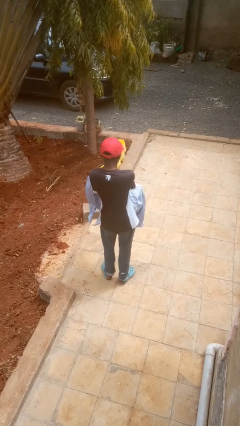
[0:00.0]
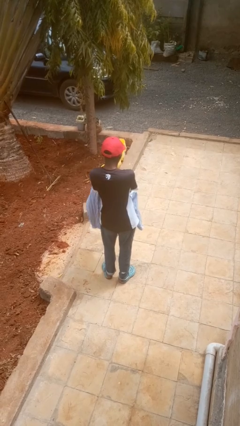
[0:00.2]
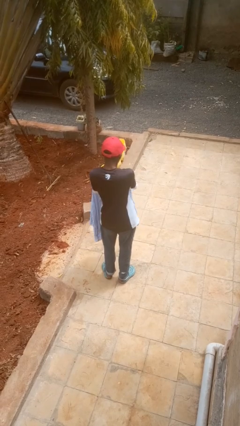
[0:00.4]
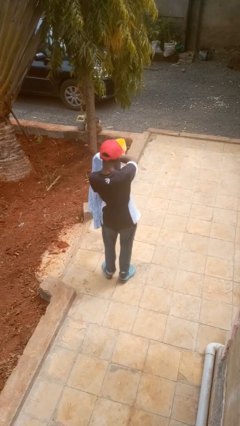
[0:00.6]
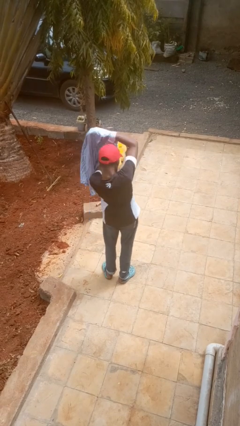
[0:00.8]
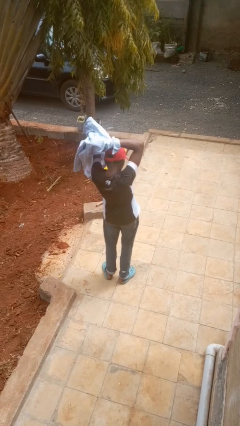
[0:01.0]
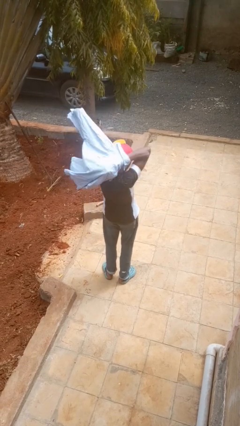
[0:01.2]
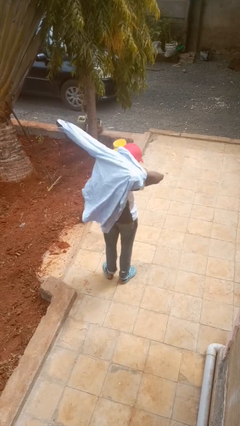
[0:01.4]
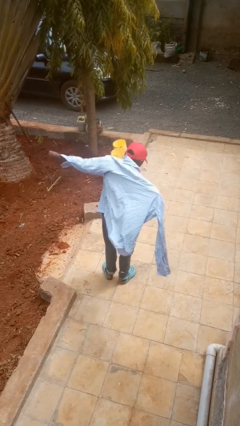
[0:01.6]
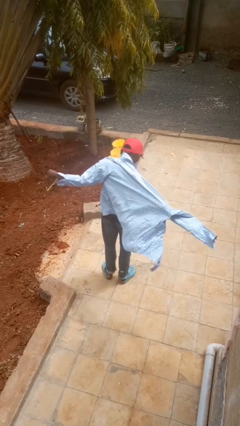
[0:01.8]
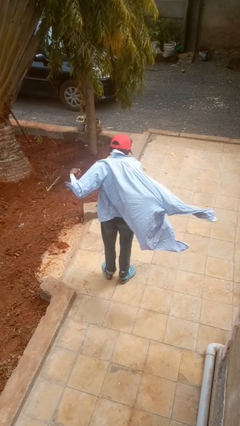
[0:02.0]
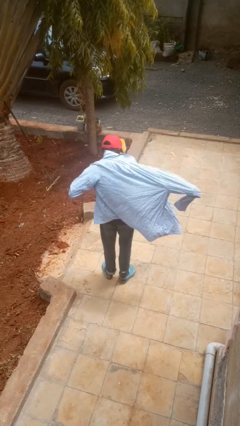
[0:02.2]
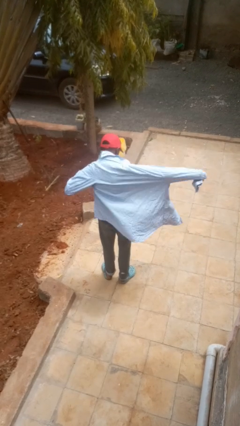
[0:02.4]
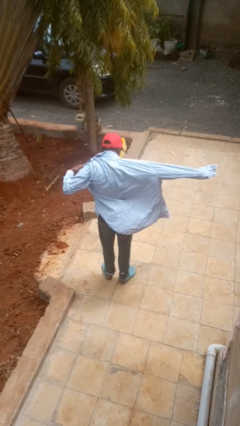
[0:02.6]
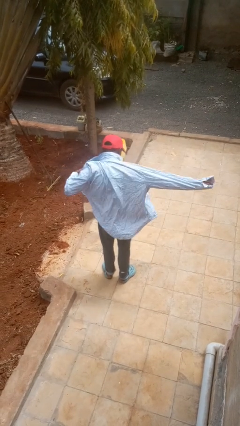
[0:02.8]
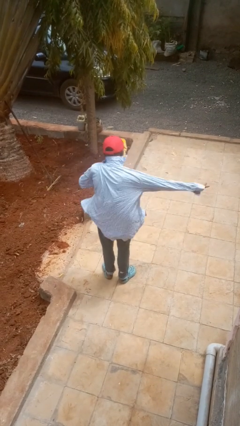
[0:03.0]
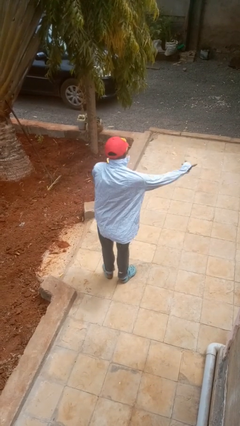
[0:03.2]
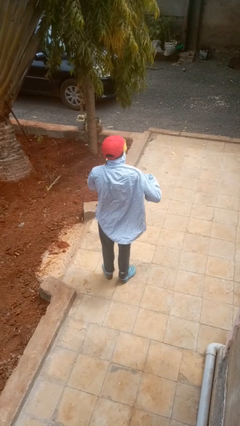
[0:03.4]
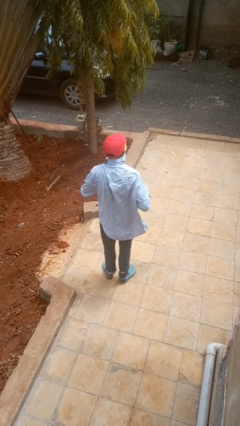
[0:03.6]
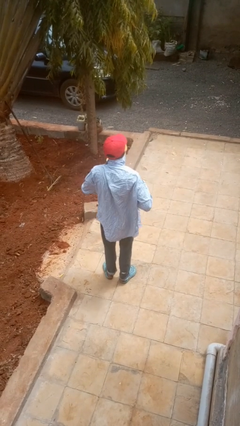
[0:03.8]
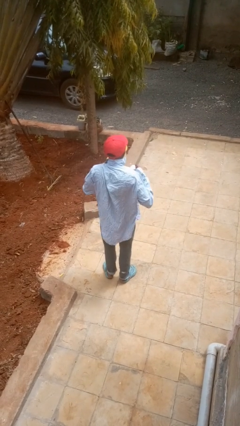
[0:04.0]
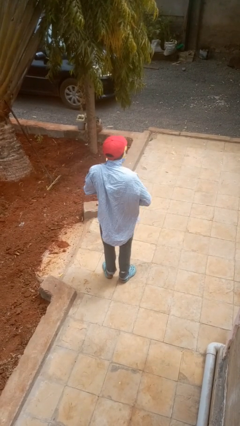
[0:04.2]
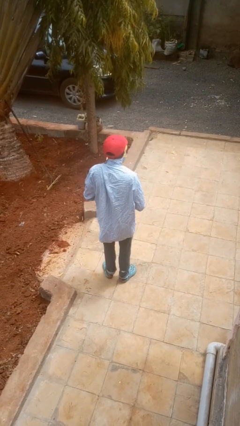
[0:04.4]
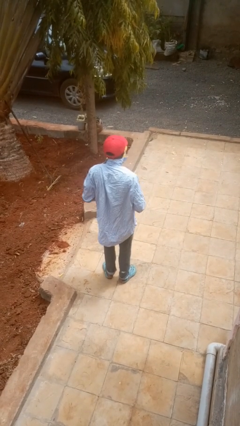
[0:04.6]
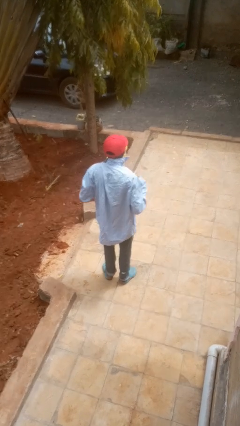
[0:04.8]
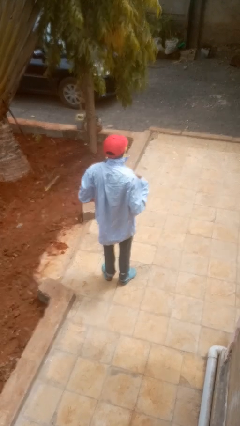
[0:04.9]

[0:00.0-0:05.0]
person puts on shirt

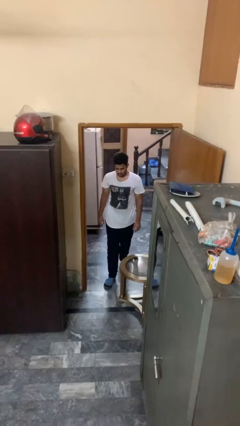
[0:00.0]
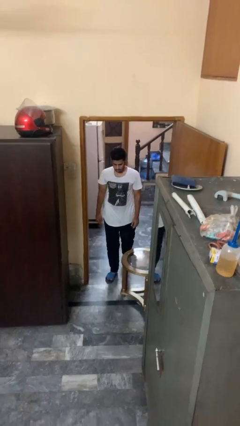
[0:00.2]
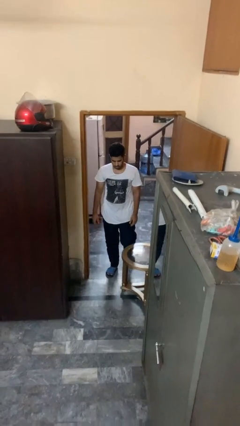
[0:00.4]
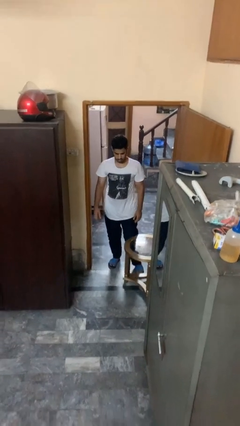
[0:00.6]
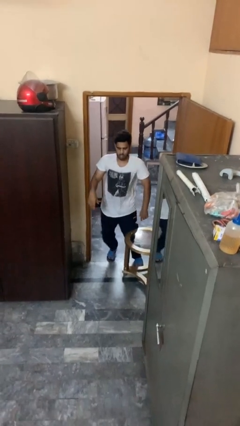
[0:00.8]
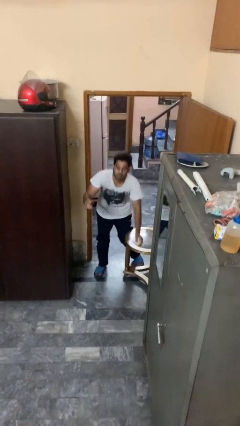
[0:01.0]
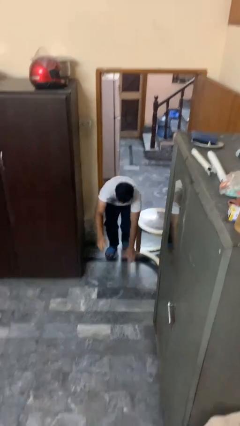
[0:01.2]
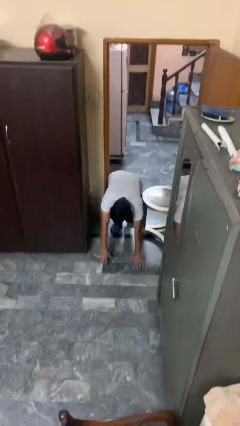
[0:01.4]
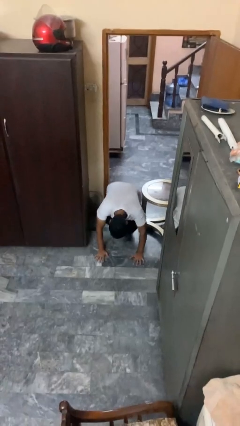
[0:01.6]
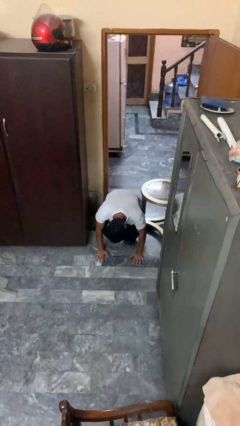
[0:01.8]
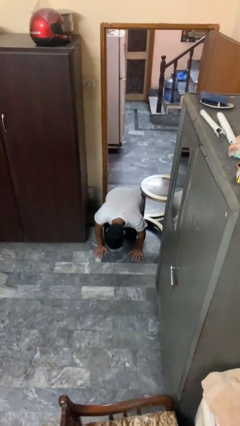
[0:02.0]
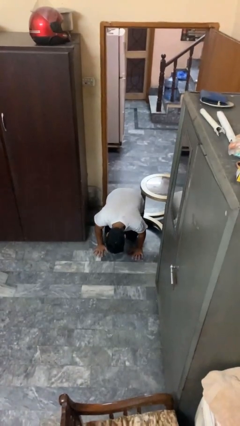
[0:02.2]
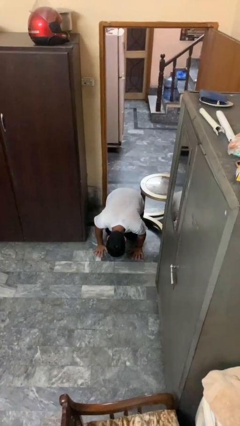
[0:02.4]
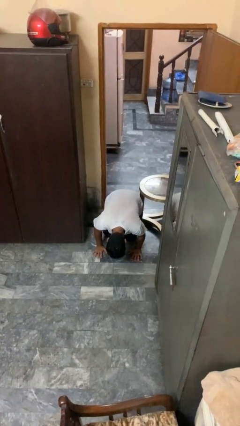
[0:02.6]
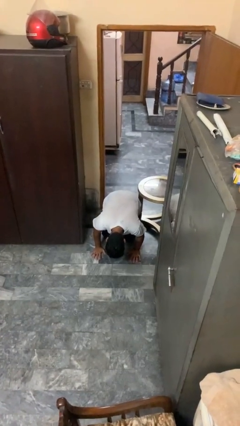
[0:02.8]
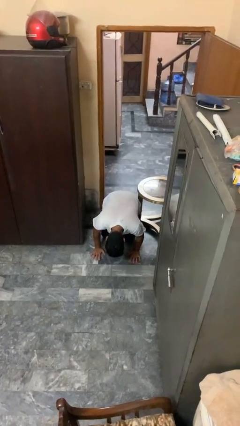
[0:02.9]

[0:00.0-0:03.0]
person trips on object on floor

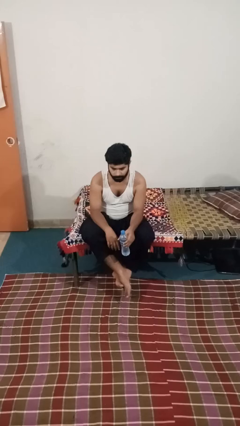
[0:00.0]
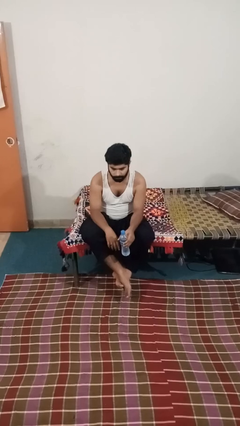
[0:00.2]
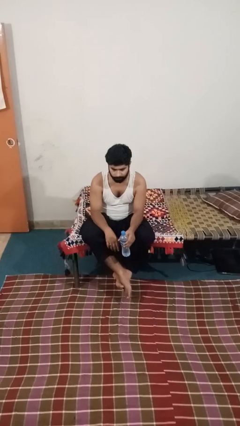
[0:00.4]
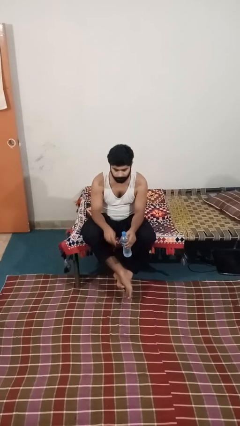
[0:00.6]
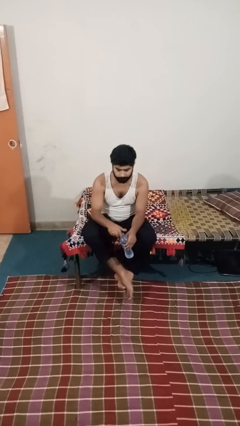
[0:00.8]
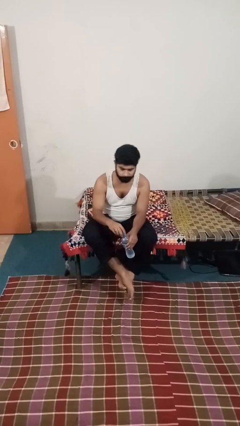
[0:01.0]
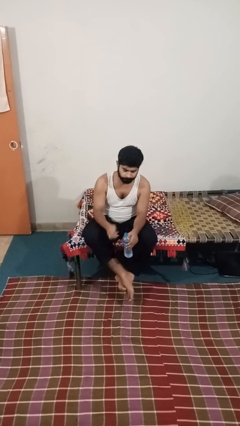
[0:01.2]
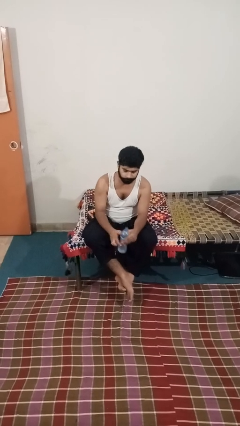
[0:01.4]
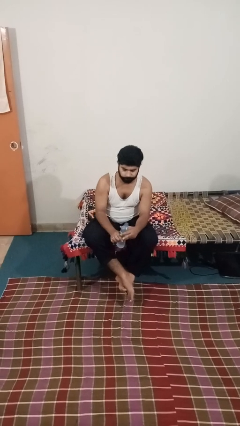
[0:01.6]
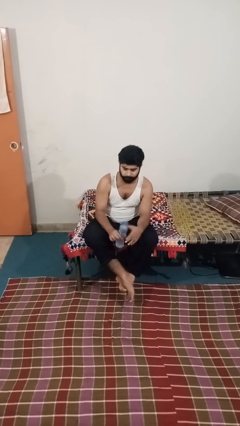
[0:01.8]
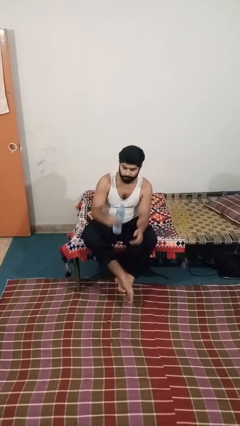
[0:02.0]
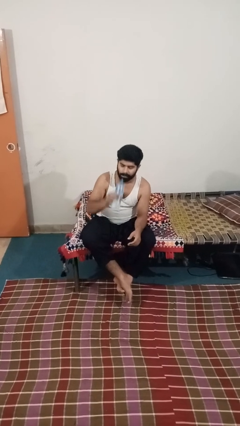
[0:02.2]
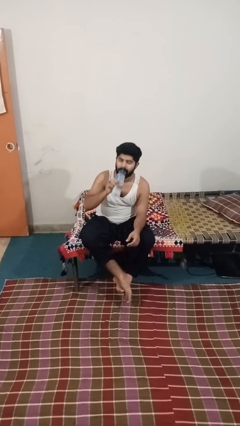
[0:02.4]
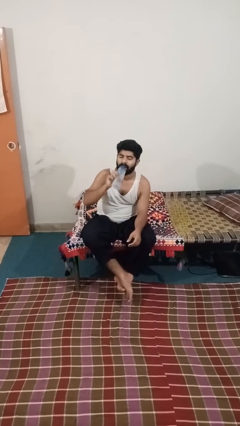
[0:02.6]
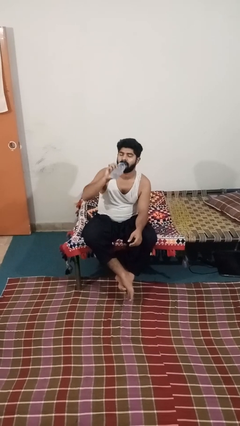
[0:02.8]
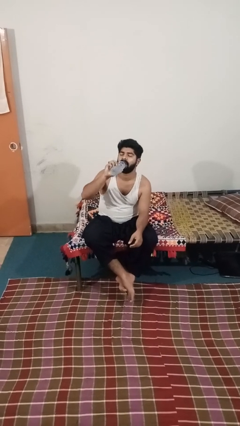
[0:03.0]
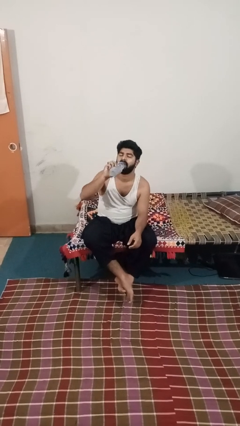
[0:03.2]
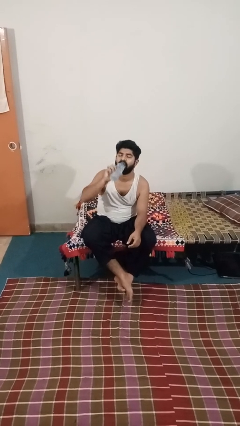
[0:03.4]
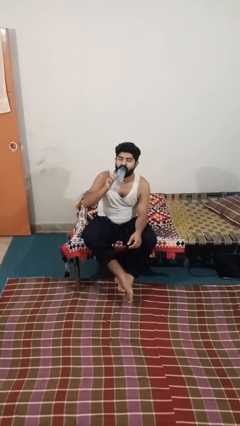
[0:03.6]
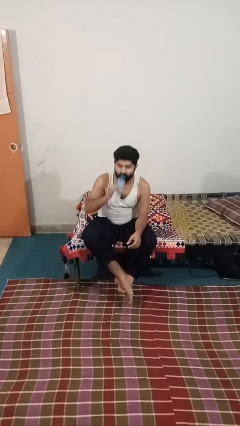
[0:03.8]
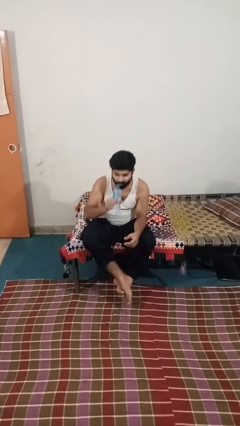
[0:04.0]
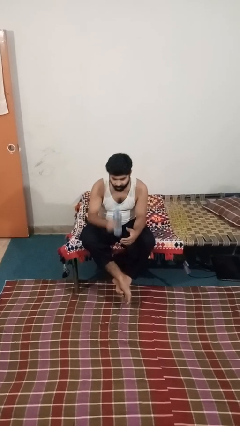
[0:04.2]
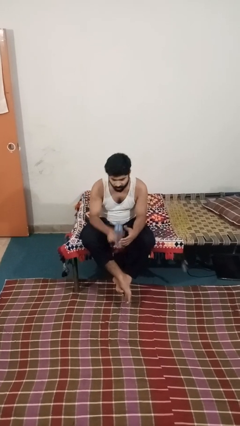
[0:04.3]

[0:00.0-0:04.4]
person drinks from bottle

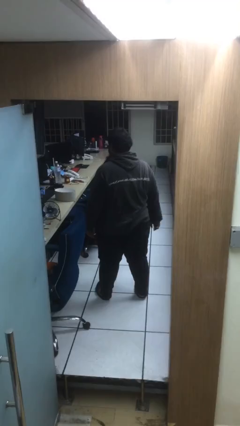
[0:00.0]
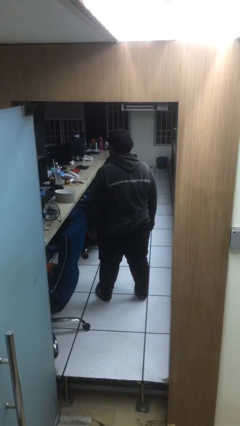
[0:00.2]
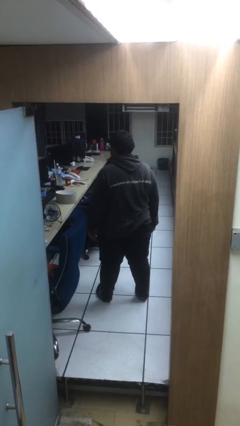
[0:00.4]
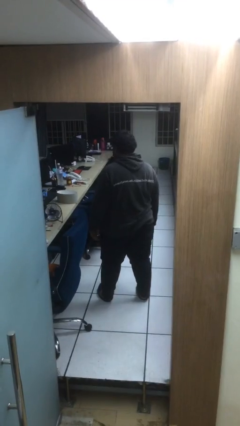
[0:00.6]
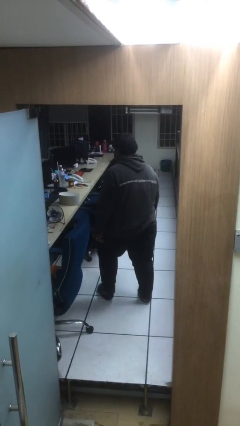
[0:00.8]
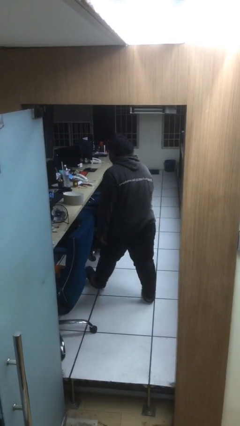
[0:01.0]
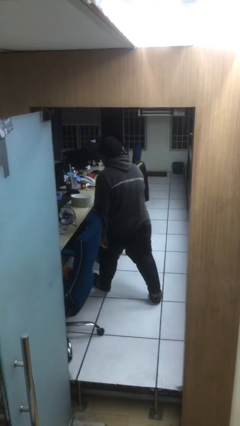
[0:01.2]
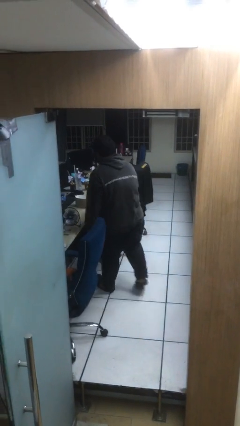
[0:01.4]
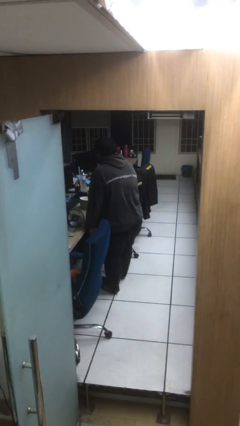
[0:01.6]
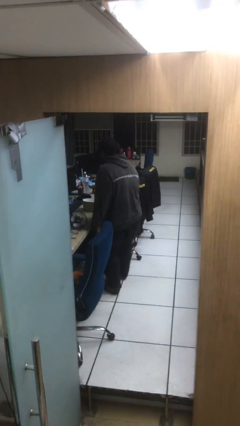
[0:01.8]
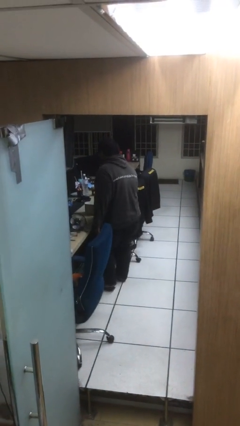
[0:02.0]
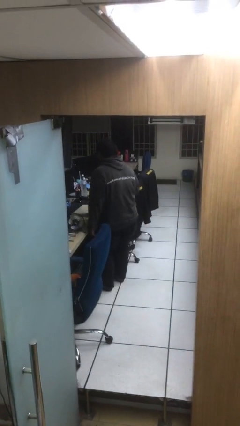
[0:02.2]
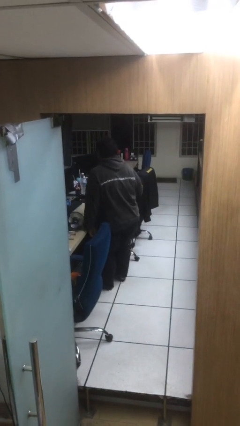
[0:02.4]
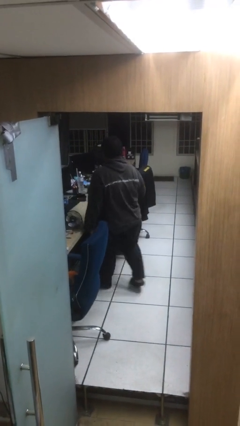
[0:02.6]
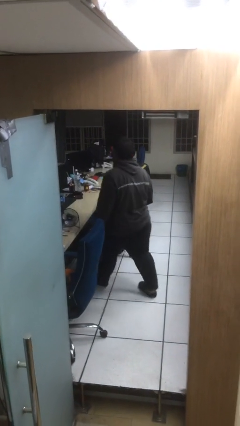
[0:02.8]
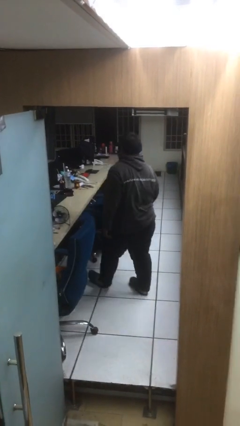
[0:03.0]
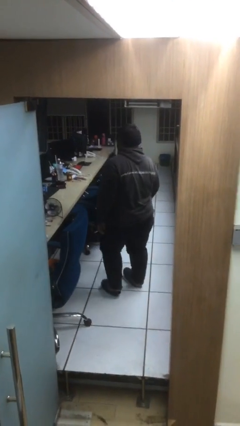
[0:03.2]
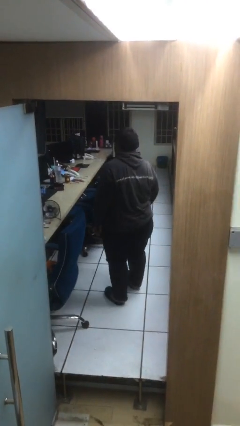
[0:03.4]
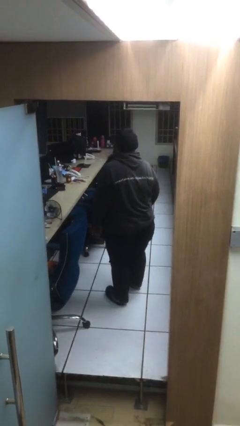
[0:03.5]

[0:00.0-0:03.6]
person picks up object from table

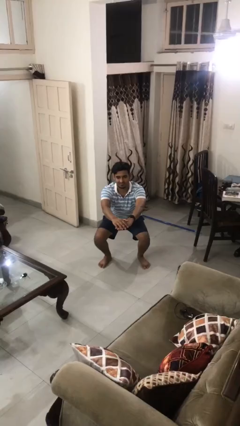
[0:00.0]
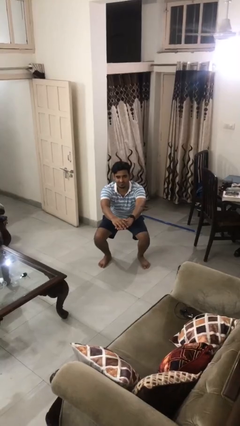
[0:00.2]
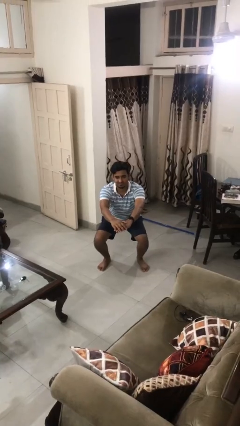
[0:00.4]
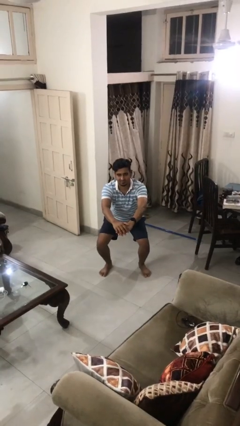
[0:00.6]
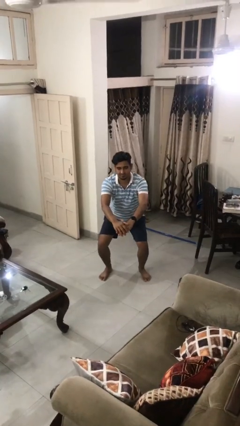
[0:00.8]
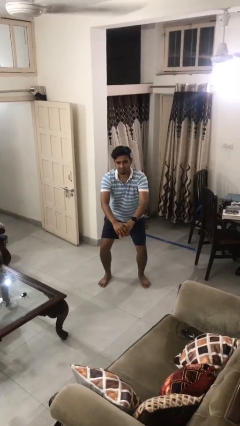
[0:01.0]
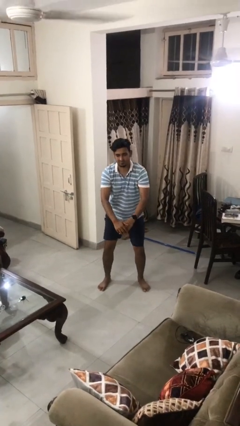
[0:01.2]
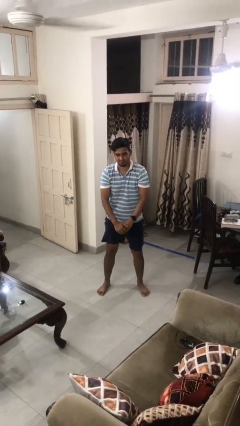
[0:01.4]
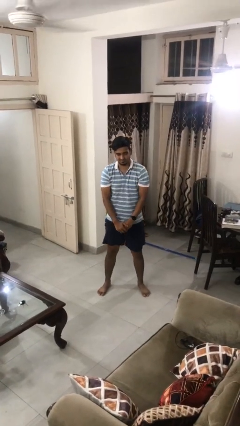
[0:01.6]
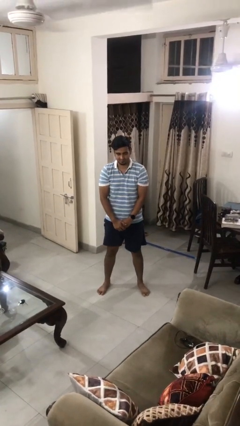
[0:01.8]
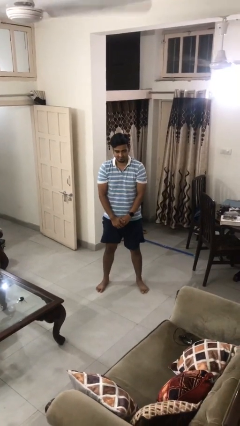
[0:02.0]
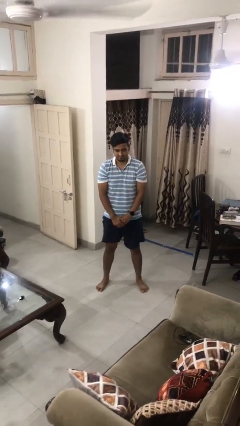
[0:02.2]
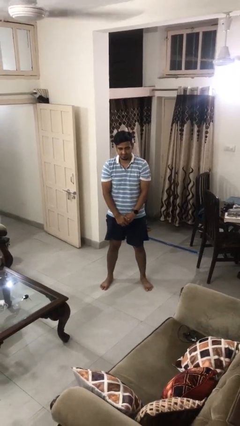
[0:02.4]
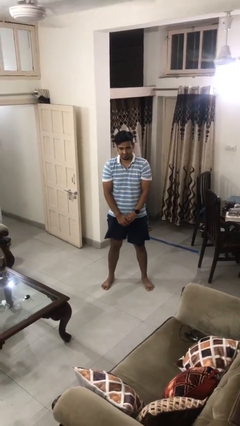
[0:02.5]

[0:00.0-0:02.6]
person stands up
